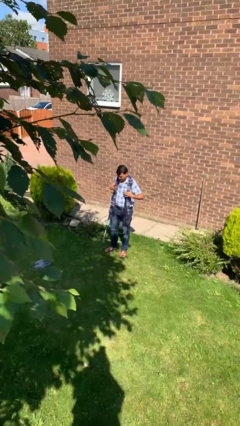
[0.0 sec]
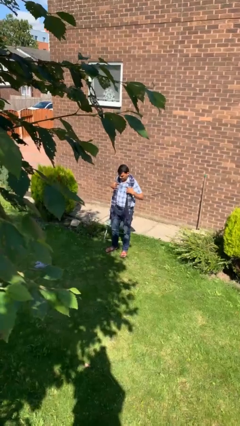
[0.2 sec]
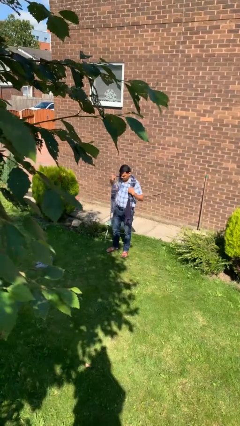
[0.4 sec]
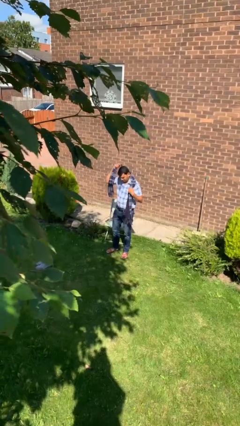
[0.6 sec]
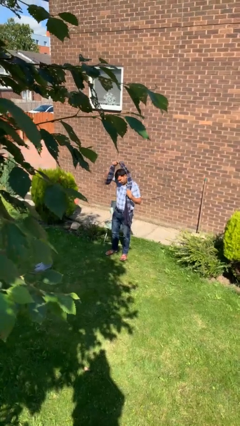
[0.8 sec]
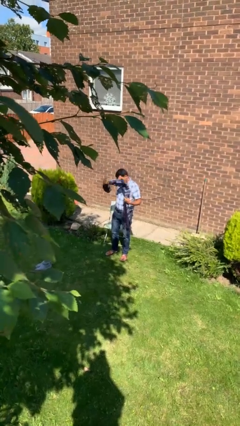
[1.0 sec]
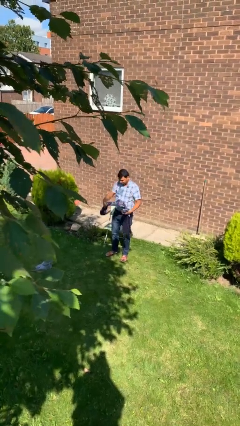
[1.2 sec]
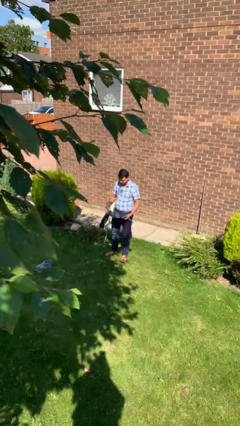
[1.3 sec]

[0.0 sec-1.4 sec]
person takes off scarf

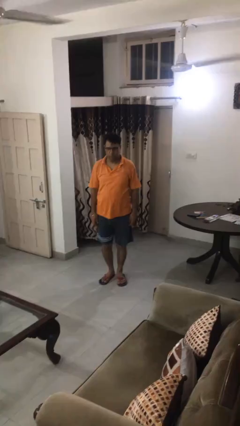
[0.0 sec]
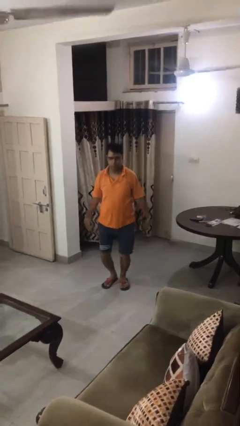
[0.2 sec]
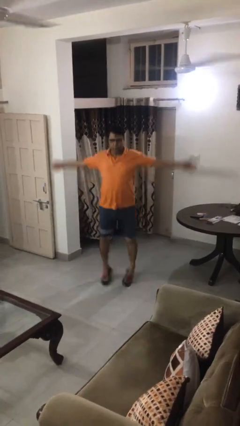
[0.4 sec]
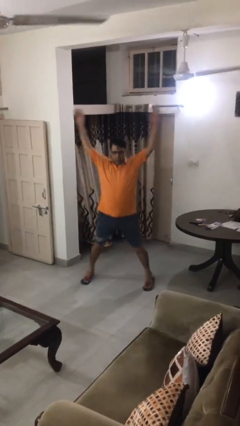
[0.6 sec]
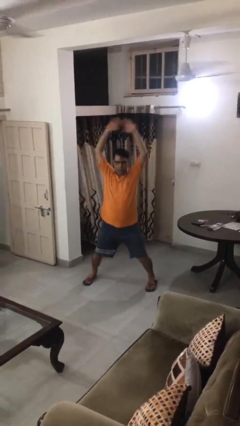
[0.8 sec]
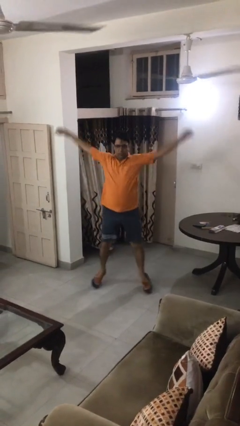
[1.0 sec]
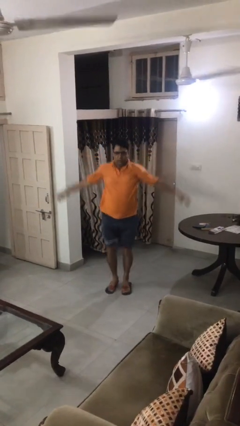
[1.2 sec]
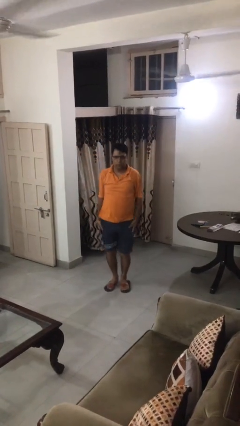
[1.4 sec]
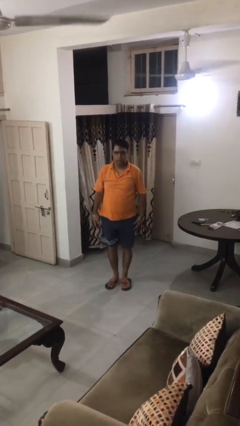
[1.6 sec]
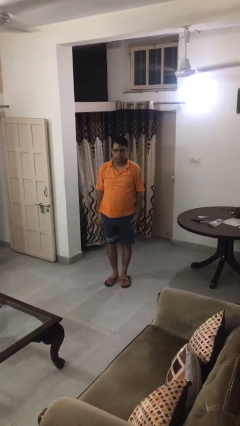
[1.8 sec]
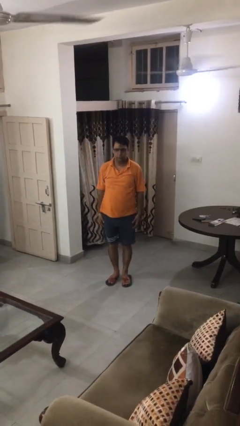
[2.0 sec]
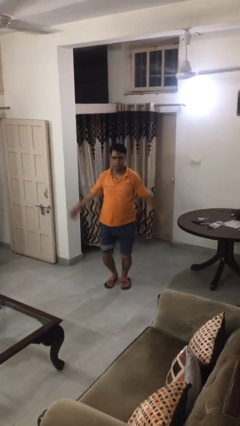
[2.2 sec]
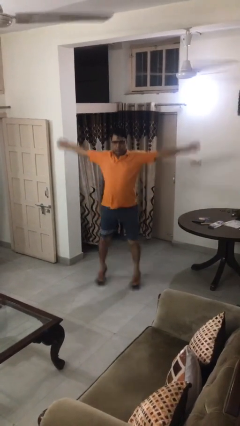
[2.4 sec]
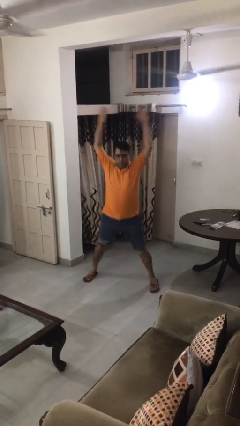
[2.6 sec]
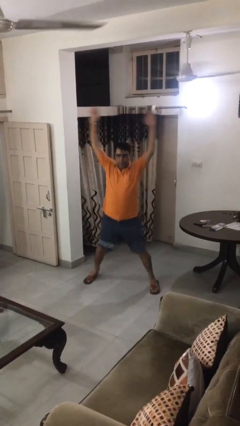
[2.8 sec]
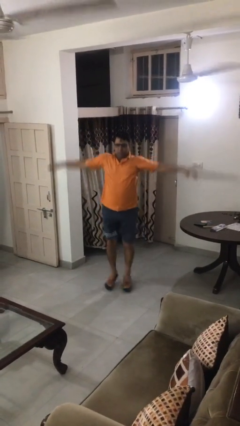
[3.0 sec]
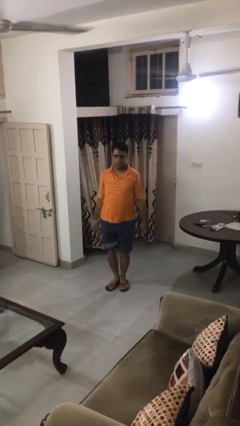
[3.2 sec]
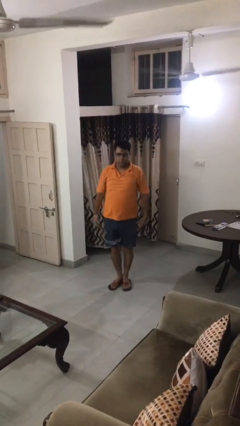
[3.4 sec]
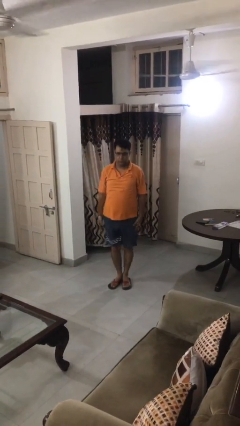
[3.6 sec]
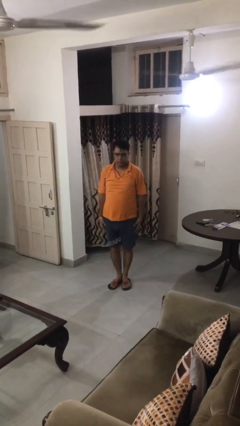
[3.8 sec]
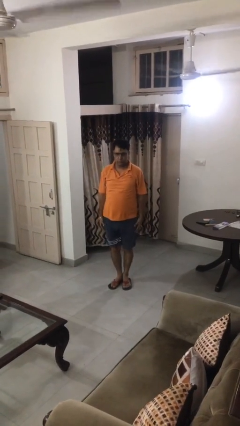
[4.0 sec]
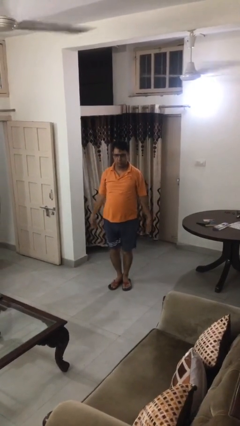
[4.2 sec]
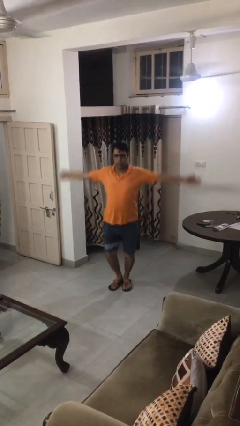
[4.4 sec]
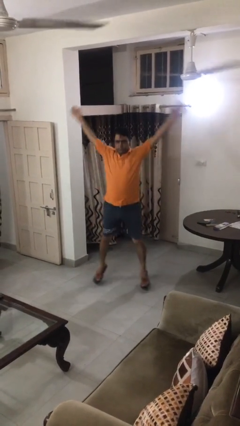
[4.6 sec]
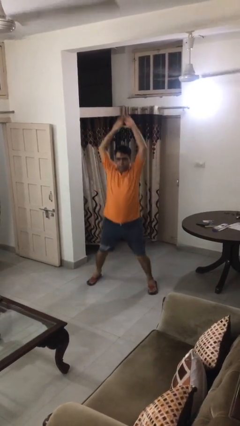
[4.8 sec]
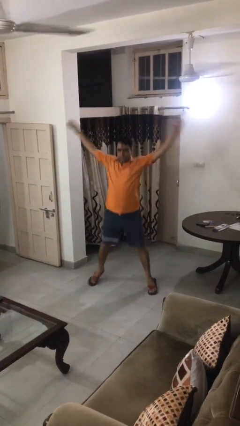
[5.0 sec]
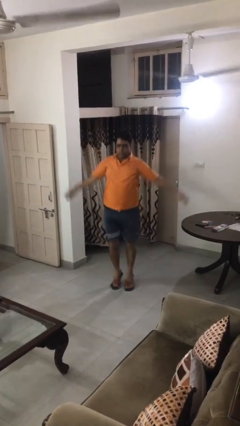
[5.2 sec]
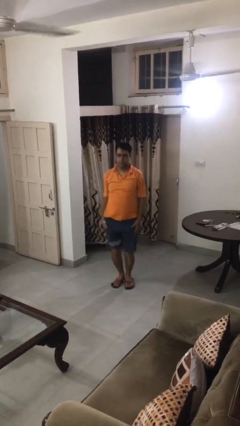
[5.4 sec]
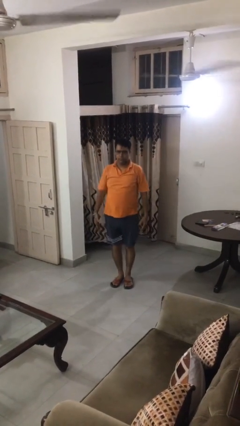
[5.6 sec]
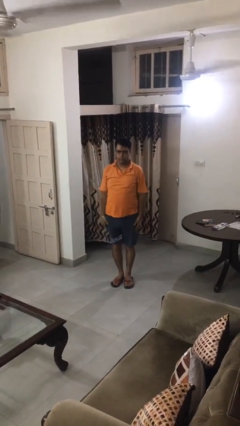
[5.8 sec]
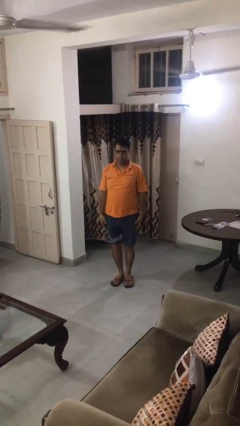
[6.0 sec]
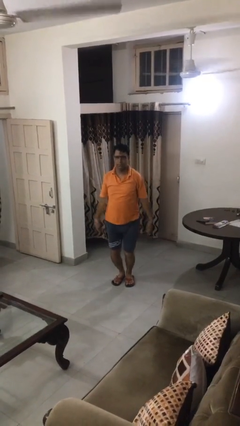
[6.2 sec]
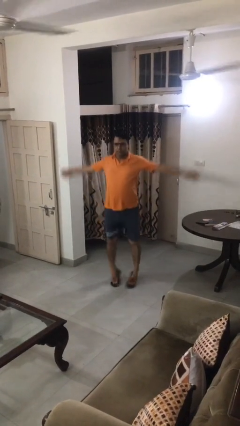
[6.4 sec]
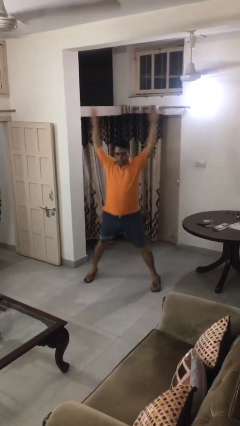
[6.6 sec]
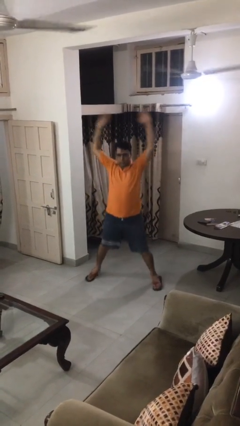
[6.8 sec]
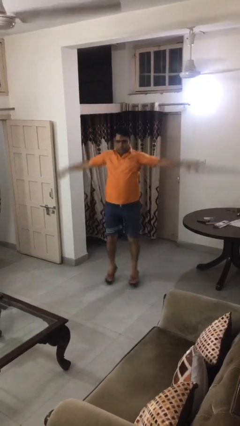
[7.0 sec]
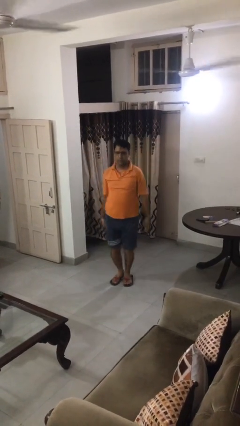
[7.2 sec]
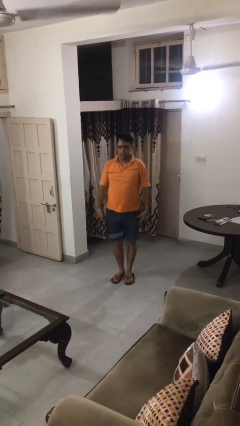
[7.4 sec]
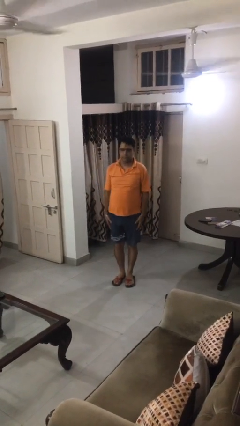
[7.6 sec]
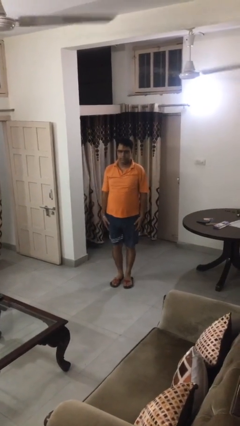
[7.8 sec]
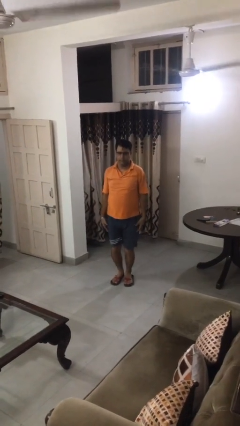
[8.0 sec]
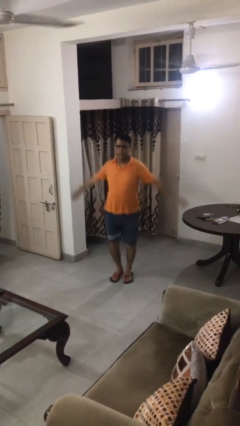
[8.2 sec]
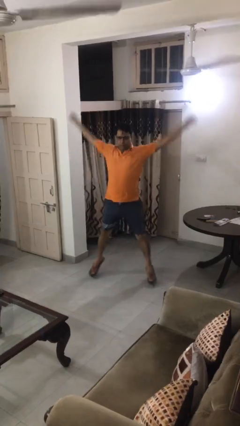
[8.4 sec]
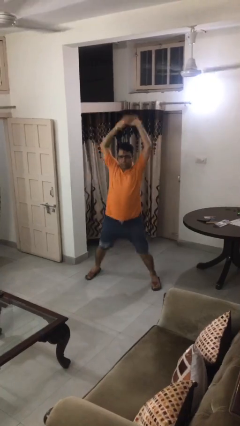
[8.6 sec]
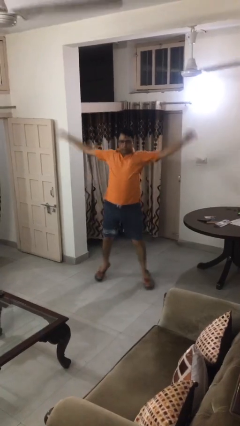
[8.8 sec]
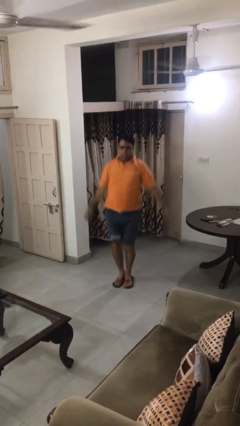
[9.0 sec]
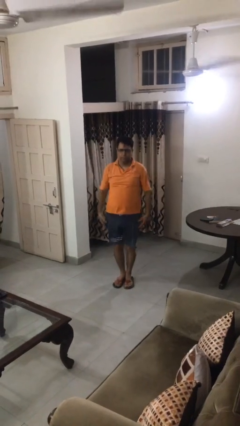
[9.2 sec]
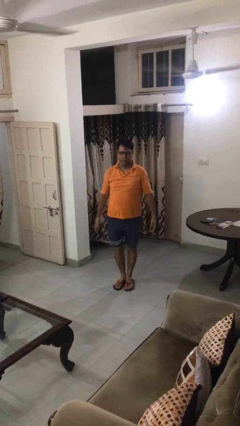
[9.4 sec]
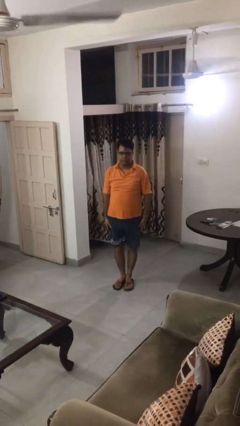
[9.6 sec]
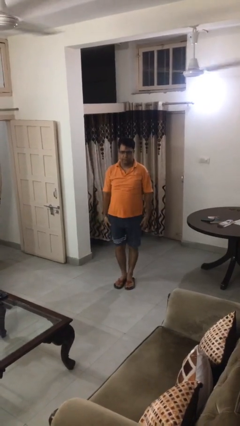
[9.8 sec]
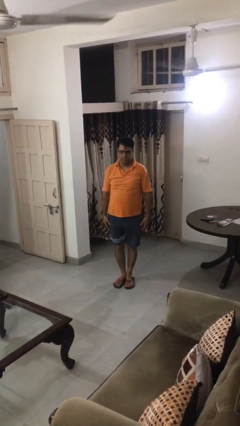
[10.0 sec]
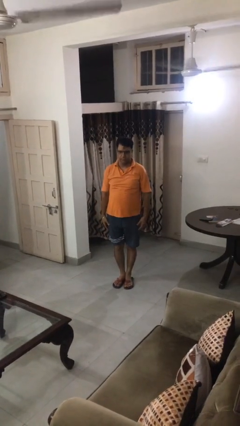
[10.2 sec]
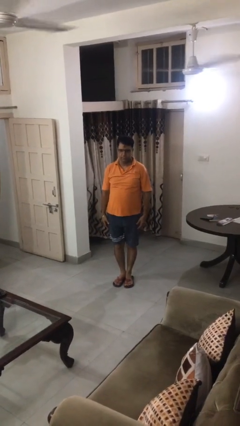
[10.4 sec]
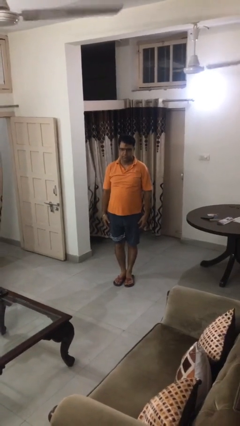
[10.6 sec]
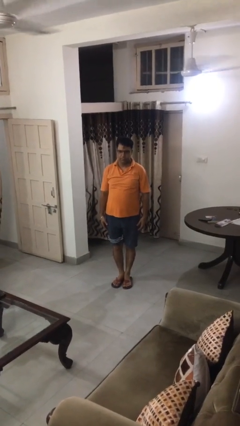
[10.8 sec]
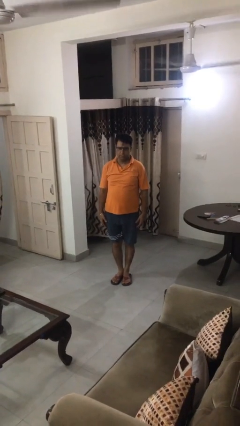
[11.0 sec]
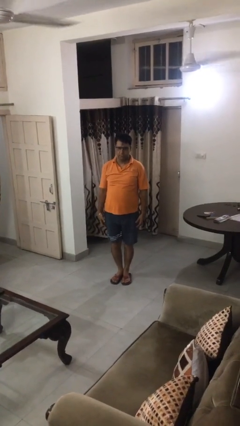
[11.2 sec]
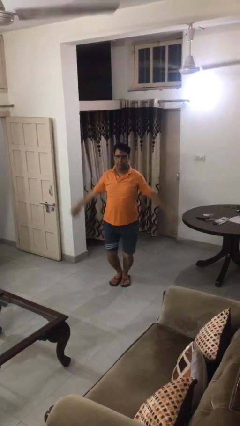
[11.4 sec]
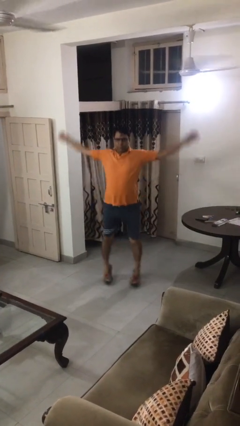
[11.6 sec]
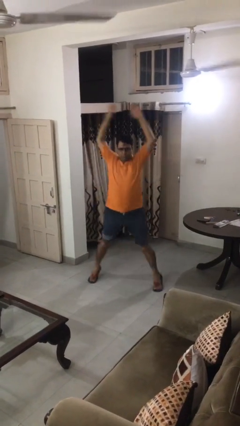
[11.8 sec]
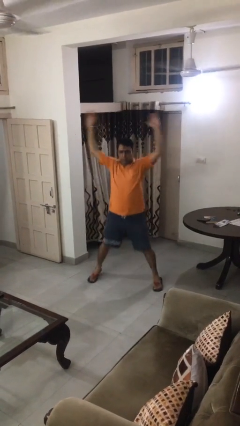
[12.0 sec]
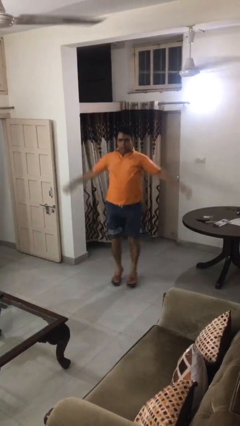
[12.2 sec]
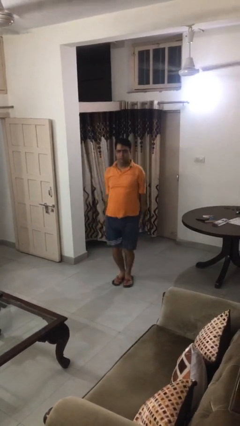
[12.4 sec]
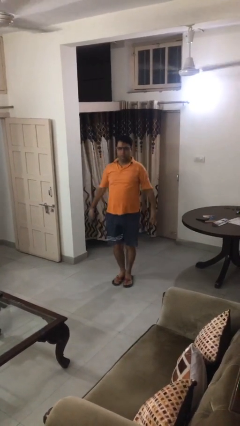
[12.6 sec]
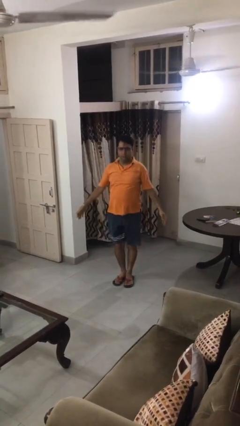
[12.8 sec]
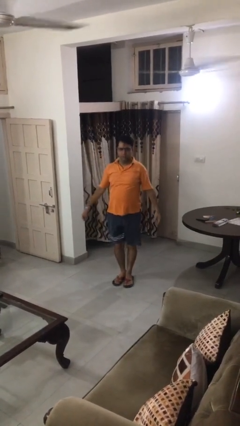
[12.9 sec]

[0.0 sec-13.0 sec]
person exercises with jumping jacks

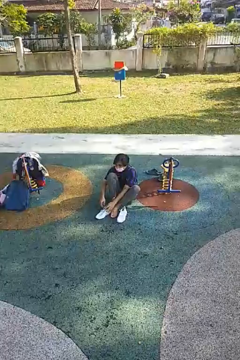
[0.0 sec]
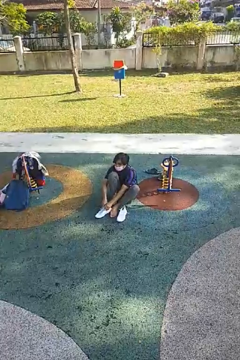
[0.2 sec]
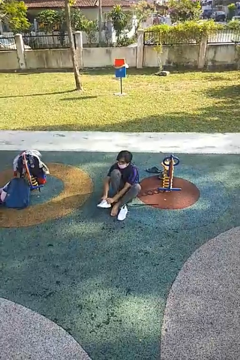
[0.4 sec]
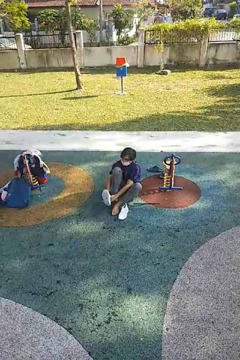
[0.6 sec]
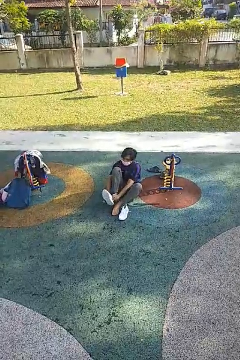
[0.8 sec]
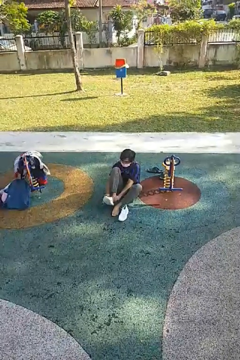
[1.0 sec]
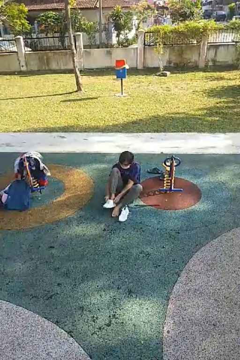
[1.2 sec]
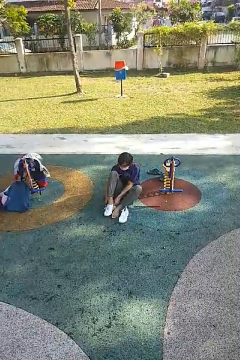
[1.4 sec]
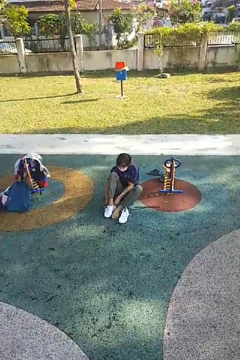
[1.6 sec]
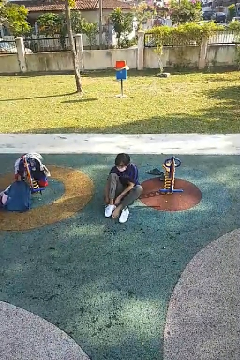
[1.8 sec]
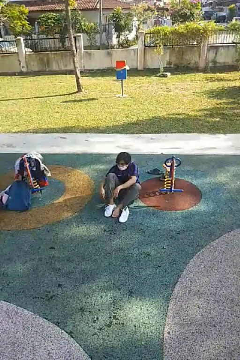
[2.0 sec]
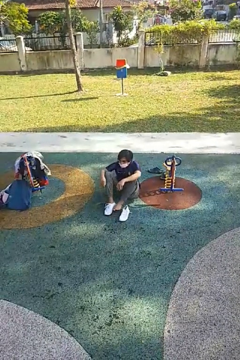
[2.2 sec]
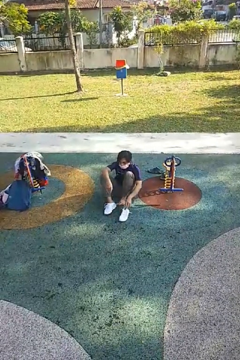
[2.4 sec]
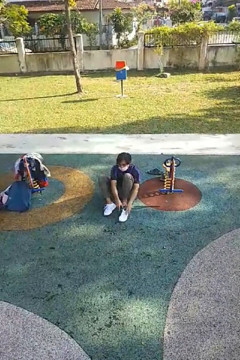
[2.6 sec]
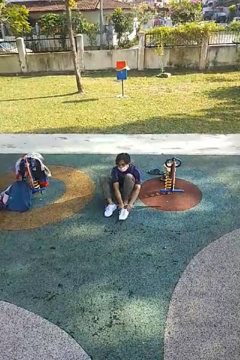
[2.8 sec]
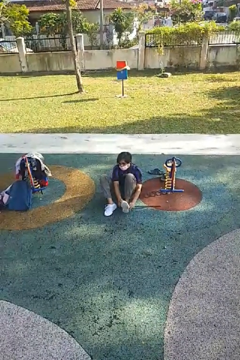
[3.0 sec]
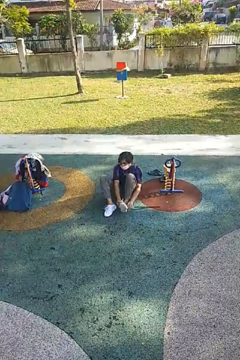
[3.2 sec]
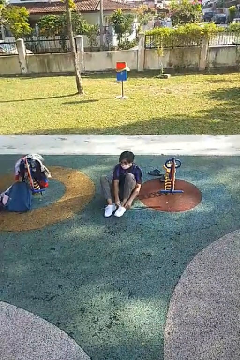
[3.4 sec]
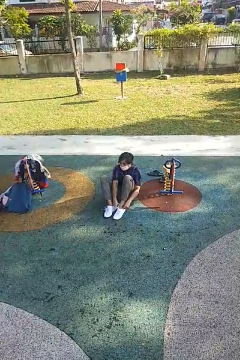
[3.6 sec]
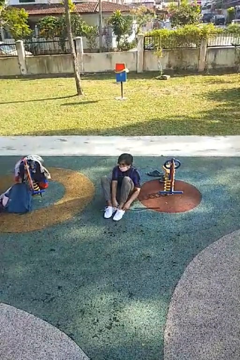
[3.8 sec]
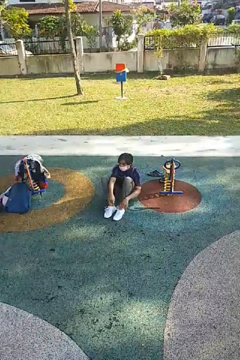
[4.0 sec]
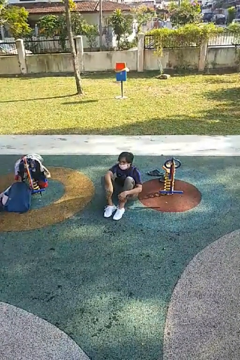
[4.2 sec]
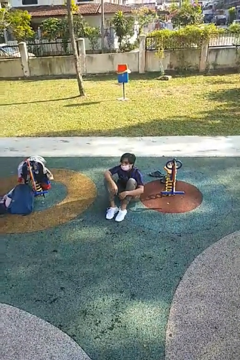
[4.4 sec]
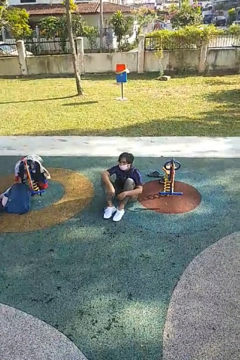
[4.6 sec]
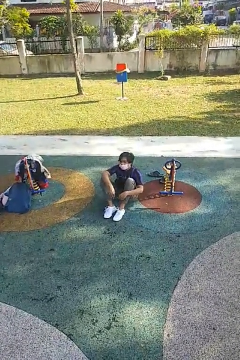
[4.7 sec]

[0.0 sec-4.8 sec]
person puts on shoes
